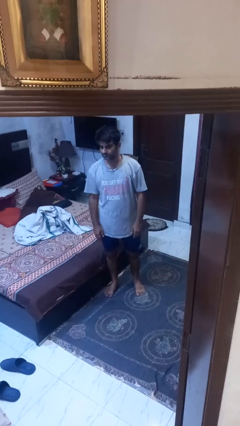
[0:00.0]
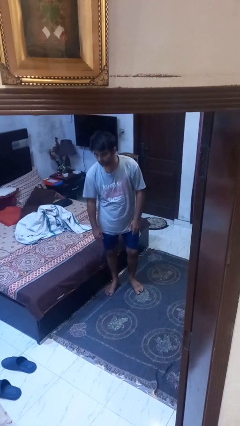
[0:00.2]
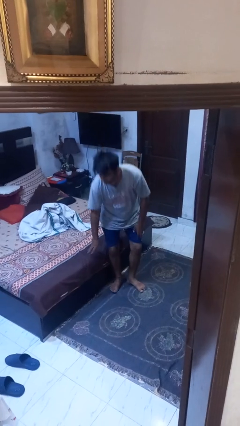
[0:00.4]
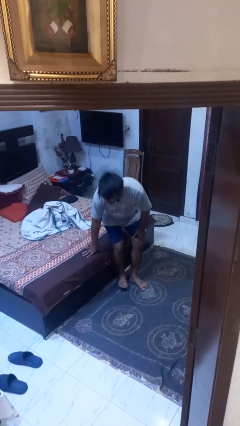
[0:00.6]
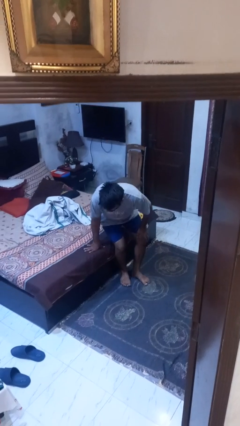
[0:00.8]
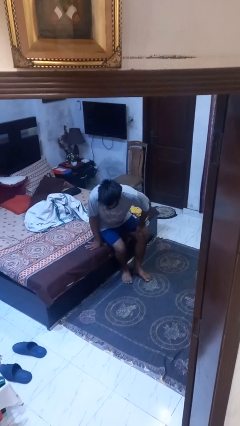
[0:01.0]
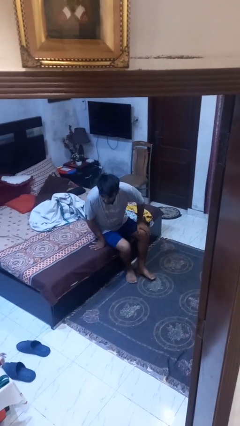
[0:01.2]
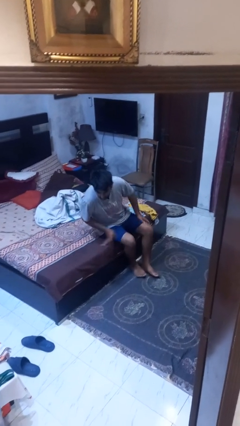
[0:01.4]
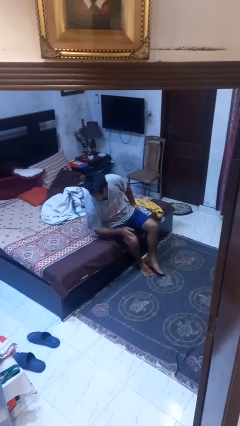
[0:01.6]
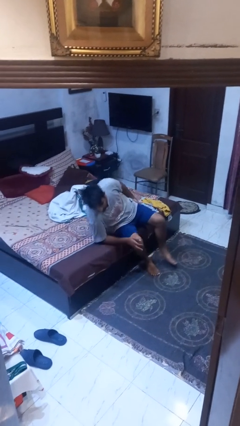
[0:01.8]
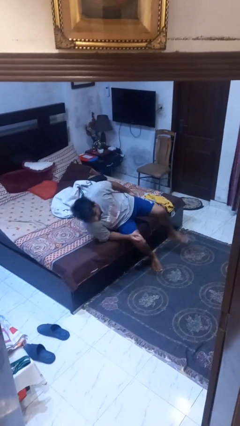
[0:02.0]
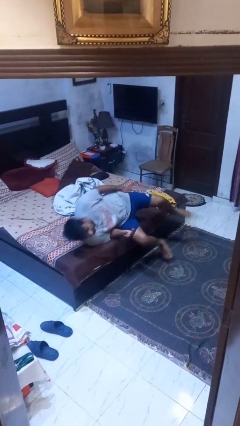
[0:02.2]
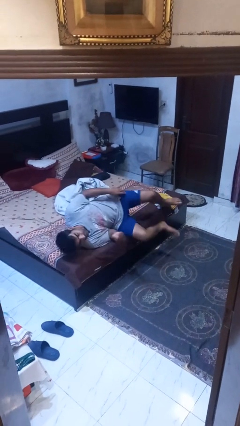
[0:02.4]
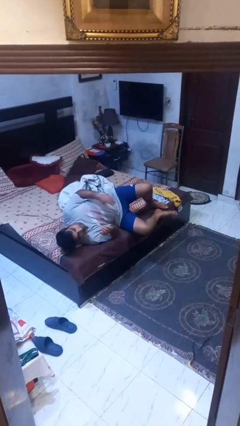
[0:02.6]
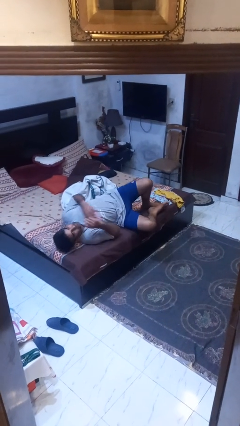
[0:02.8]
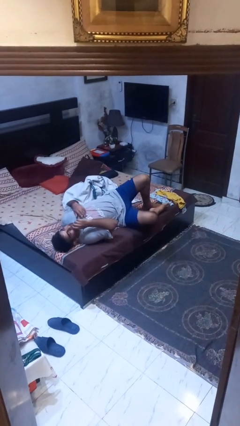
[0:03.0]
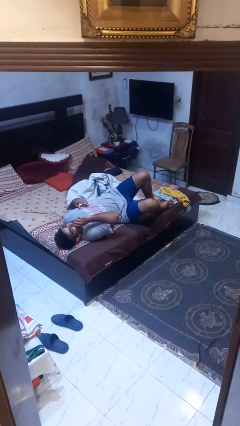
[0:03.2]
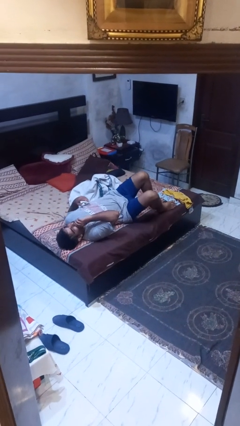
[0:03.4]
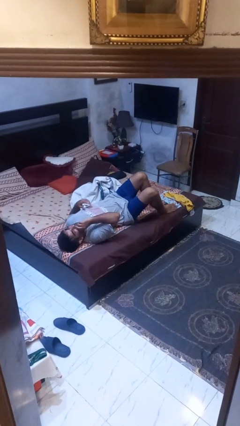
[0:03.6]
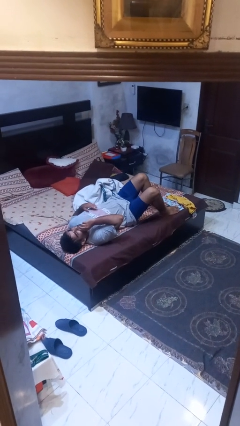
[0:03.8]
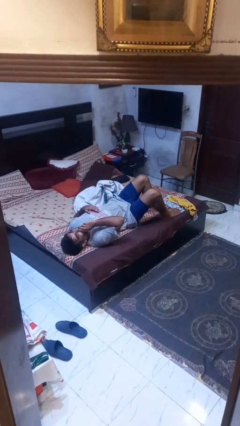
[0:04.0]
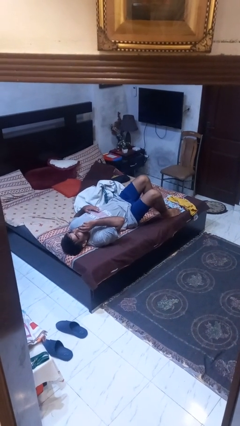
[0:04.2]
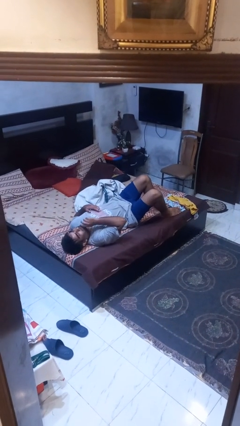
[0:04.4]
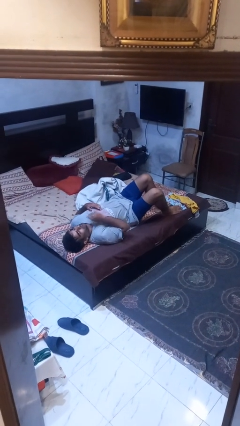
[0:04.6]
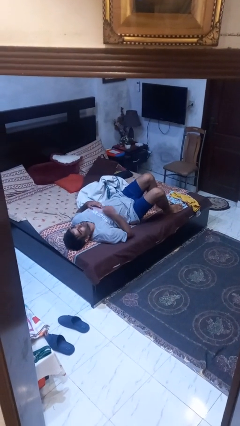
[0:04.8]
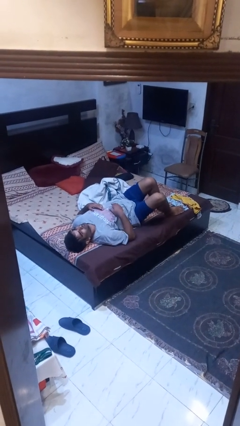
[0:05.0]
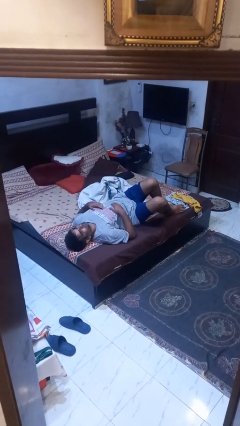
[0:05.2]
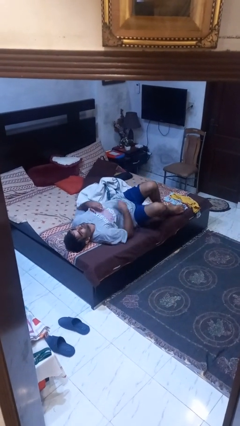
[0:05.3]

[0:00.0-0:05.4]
person lies down on bed

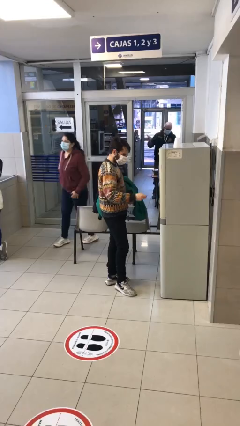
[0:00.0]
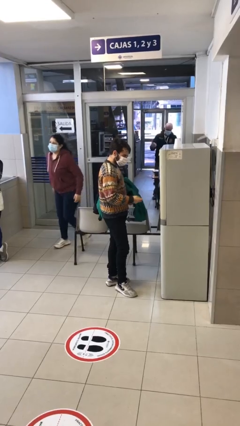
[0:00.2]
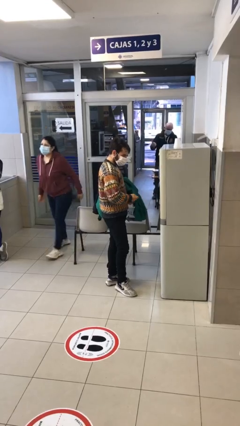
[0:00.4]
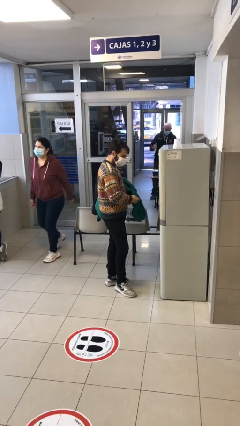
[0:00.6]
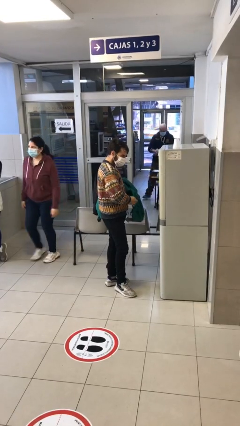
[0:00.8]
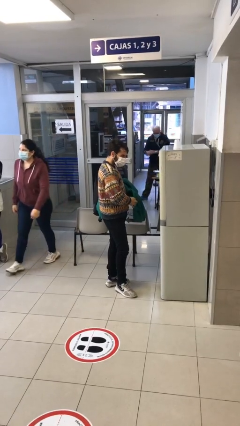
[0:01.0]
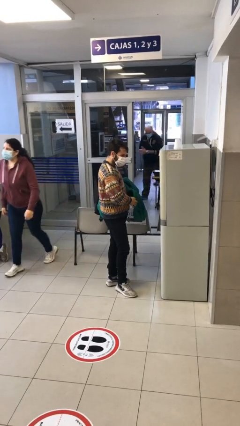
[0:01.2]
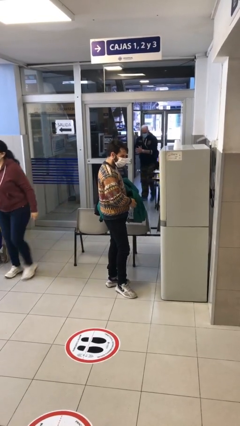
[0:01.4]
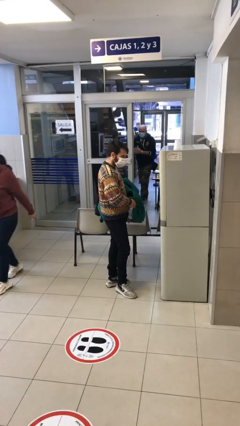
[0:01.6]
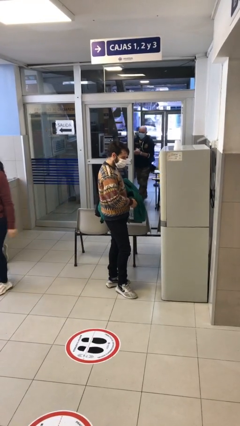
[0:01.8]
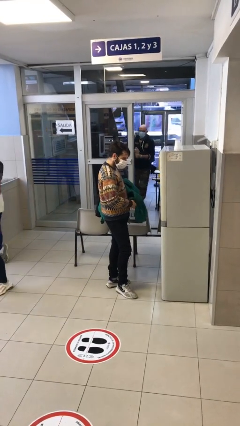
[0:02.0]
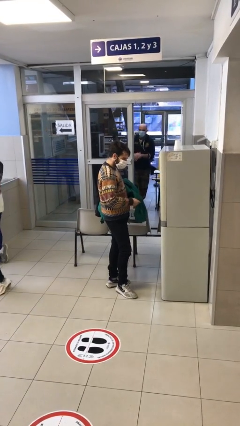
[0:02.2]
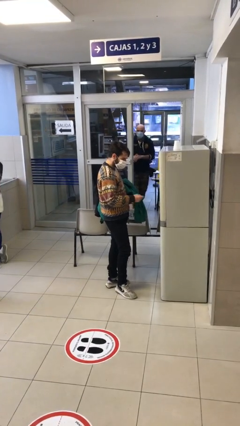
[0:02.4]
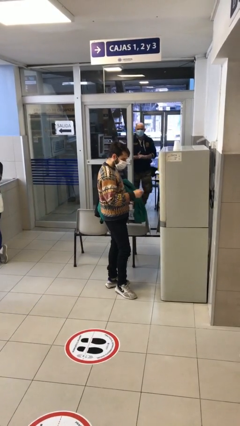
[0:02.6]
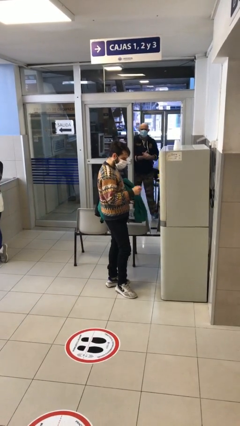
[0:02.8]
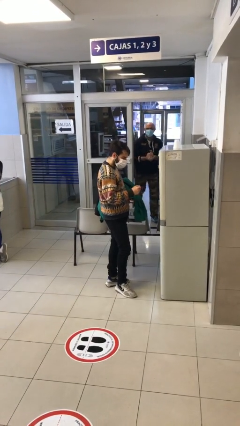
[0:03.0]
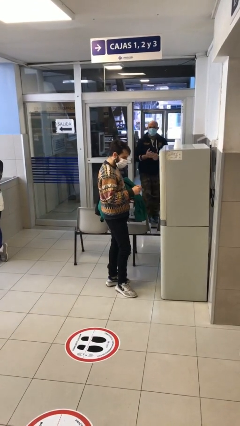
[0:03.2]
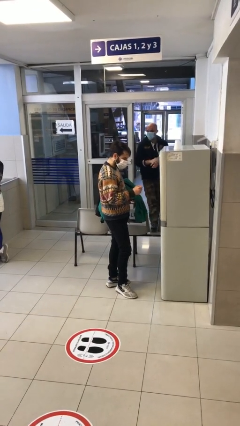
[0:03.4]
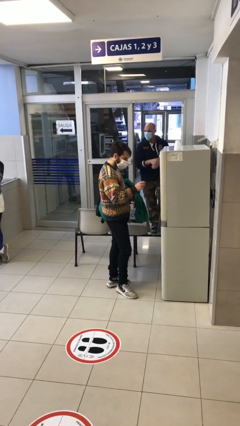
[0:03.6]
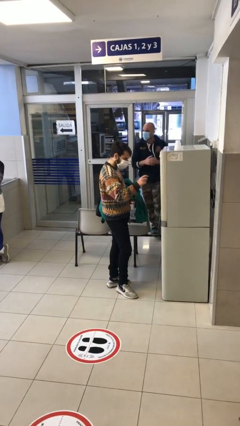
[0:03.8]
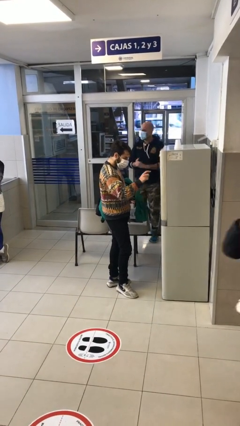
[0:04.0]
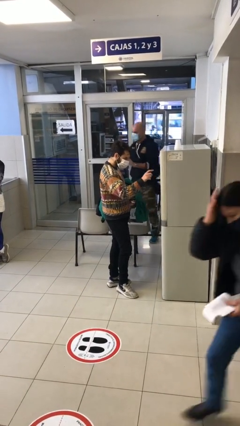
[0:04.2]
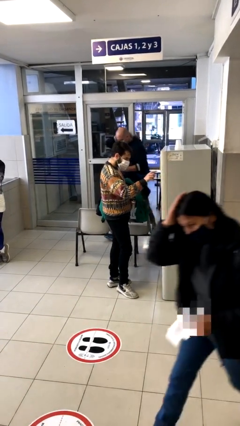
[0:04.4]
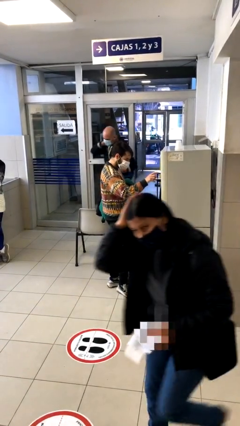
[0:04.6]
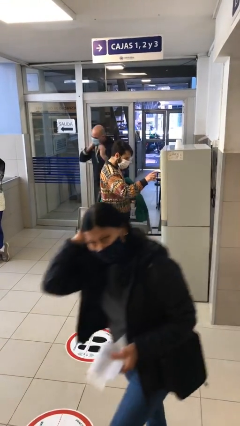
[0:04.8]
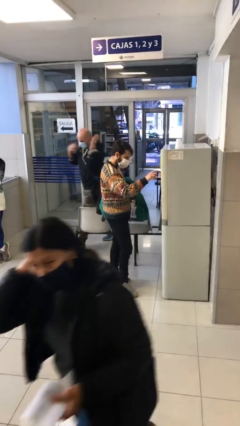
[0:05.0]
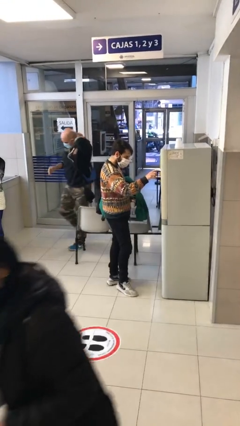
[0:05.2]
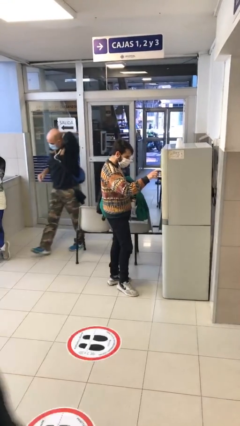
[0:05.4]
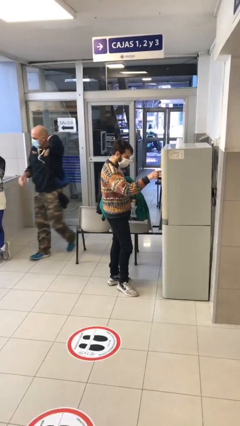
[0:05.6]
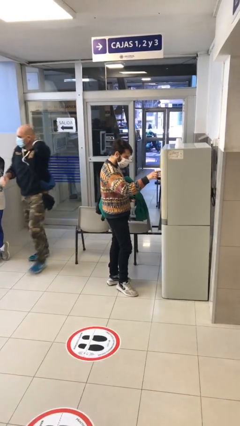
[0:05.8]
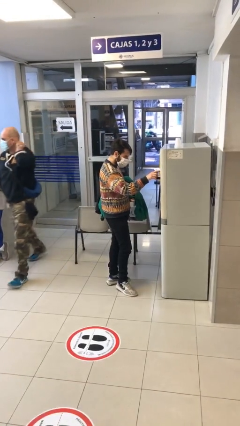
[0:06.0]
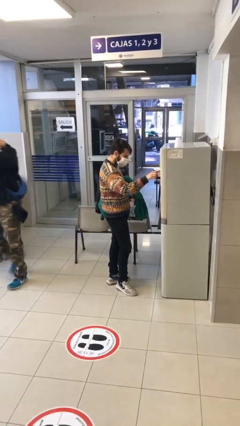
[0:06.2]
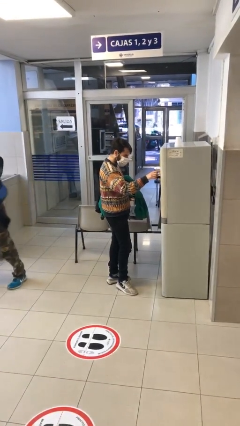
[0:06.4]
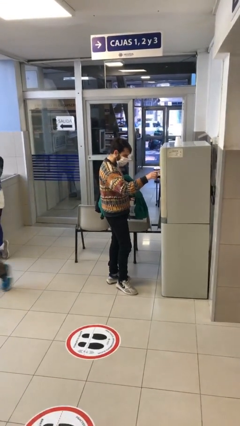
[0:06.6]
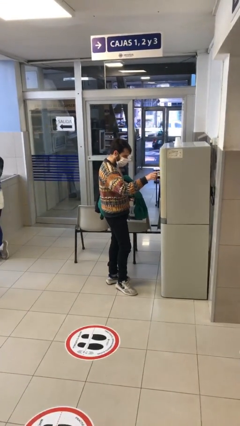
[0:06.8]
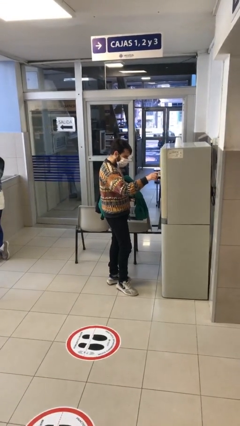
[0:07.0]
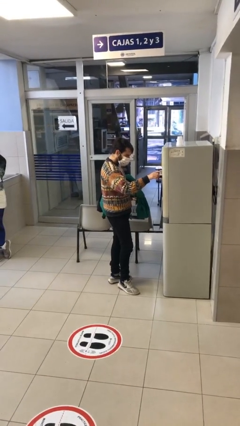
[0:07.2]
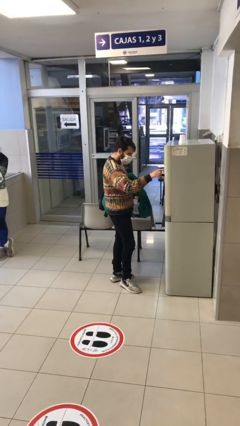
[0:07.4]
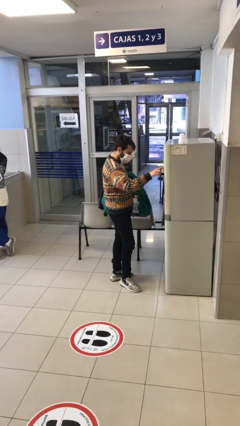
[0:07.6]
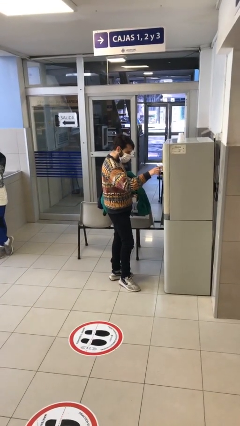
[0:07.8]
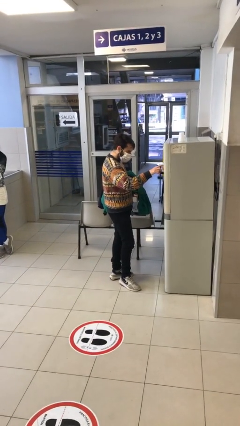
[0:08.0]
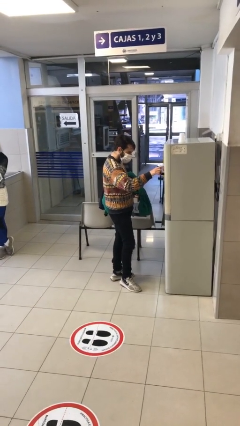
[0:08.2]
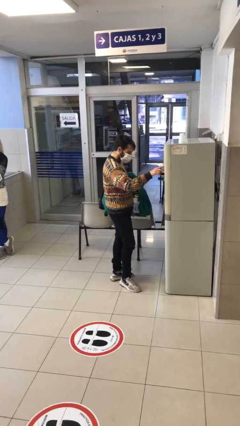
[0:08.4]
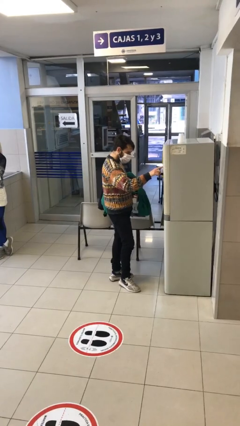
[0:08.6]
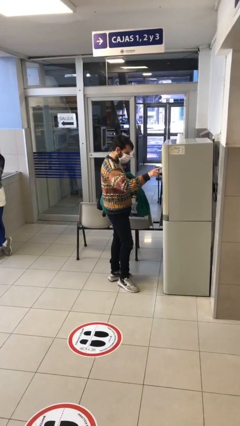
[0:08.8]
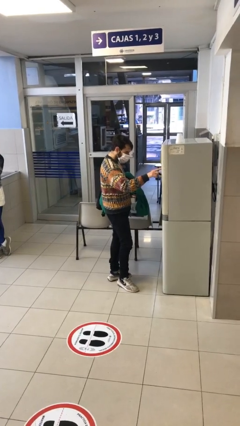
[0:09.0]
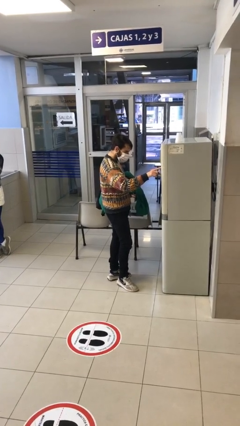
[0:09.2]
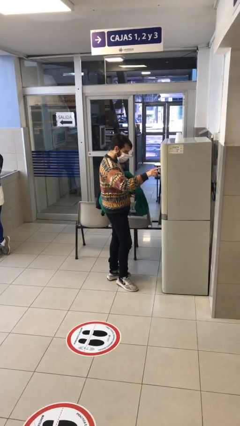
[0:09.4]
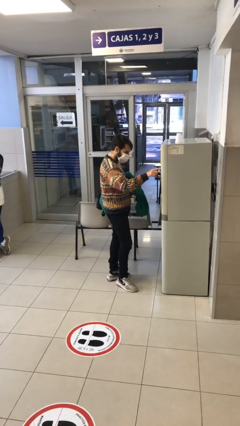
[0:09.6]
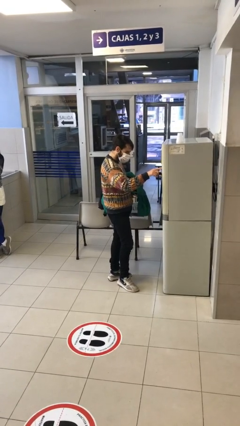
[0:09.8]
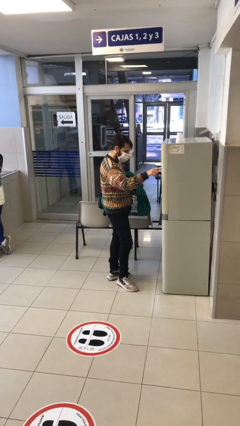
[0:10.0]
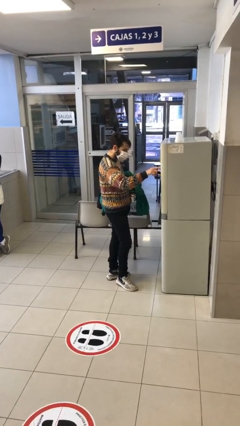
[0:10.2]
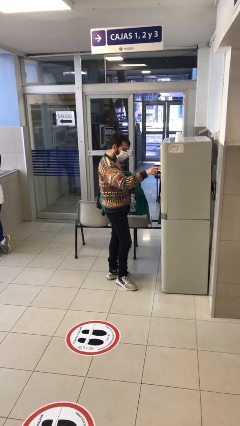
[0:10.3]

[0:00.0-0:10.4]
person purchases from machine

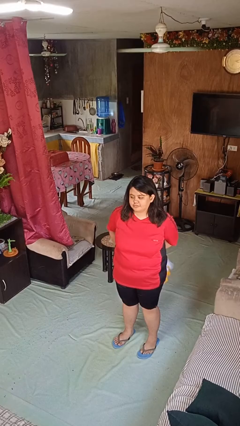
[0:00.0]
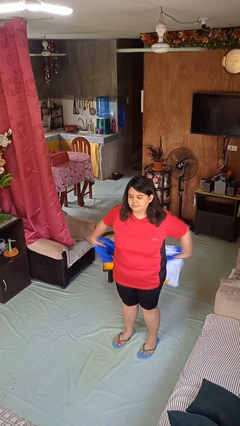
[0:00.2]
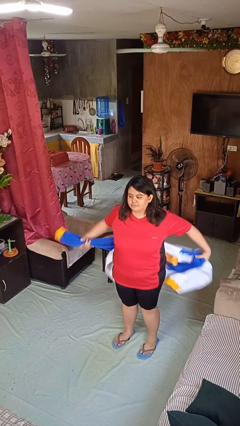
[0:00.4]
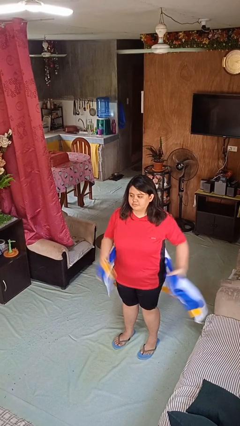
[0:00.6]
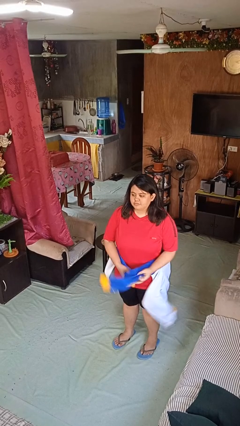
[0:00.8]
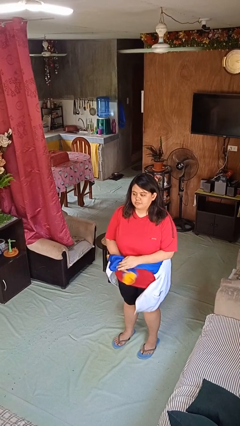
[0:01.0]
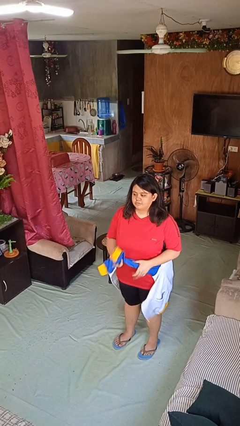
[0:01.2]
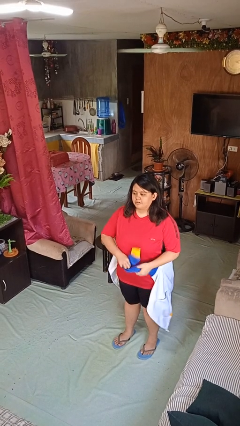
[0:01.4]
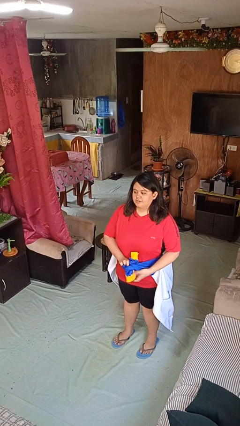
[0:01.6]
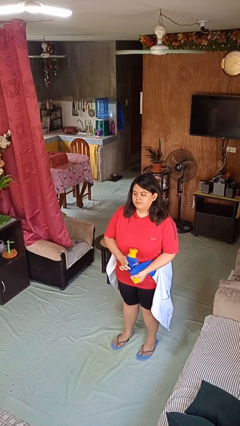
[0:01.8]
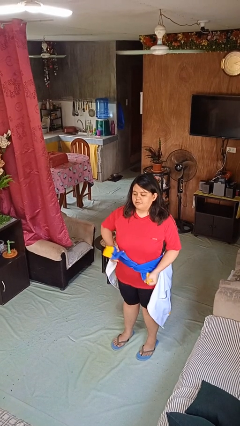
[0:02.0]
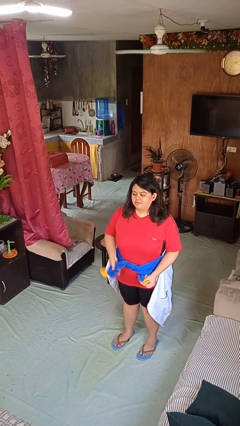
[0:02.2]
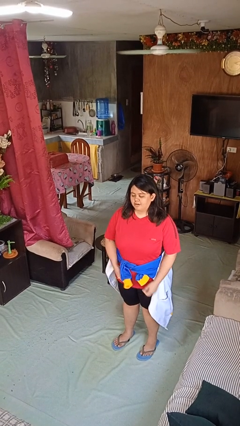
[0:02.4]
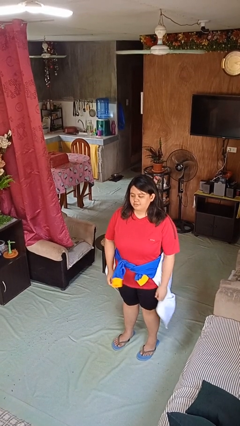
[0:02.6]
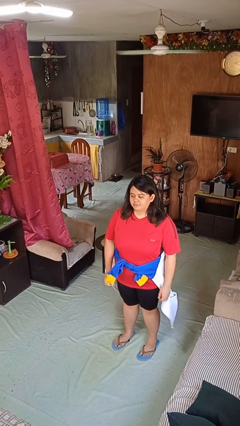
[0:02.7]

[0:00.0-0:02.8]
person ties jacket around waist
